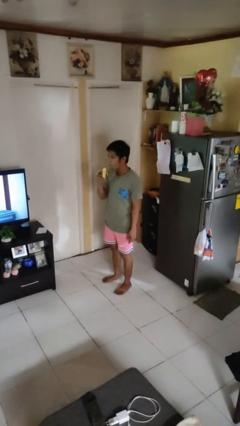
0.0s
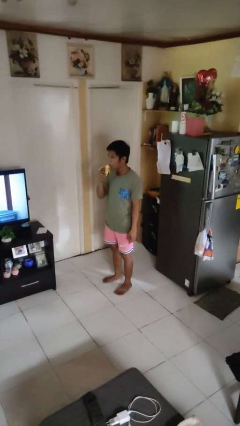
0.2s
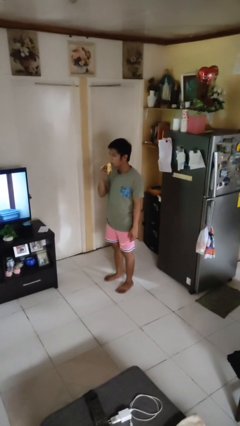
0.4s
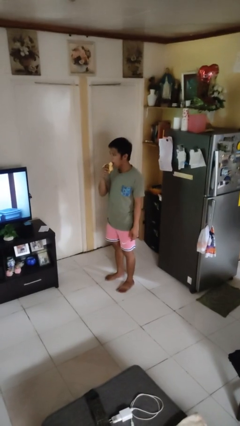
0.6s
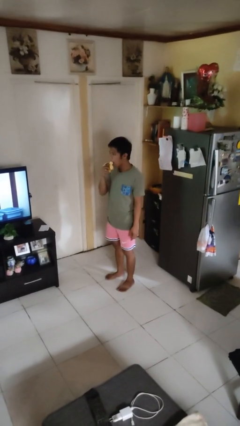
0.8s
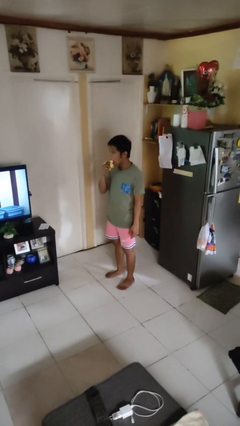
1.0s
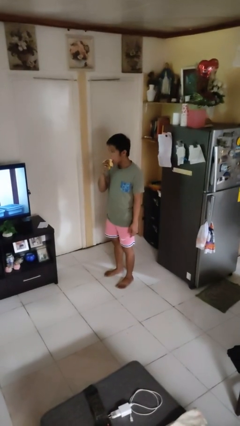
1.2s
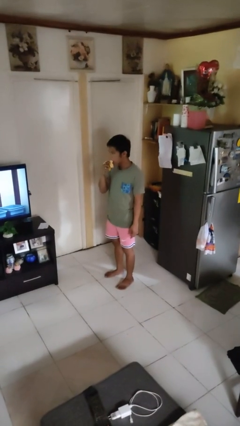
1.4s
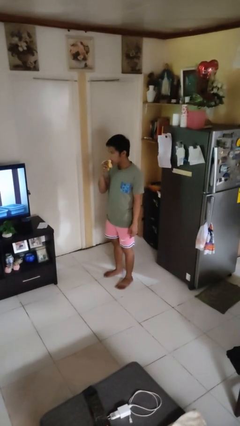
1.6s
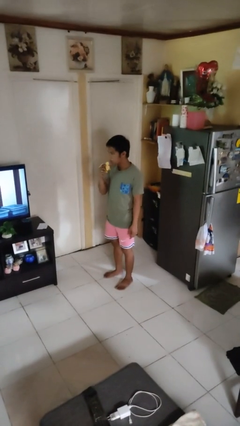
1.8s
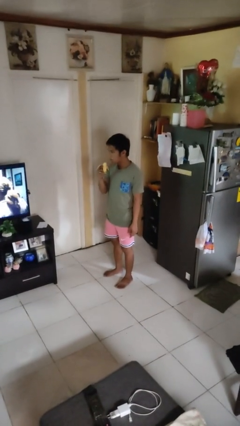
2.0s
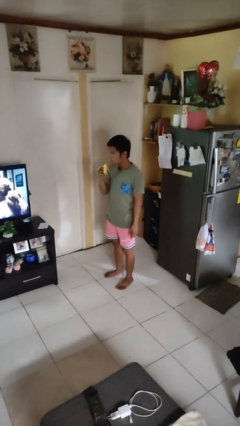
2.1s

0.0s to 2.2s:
person eats banana

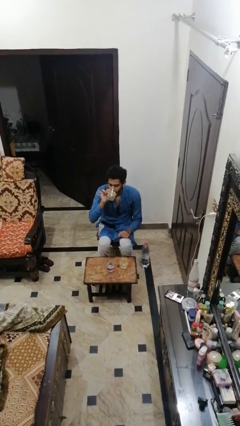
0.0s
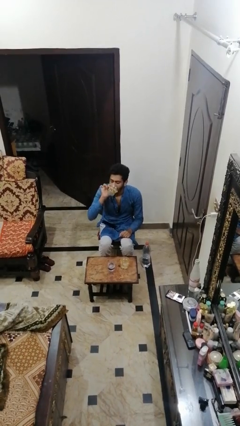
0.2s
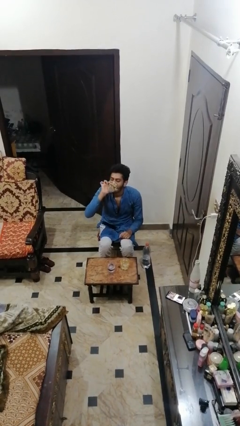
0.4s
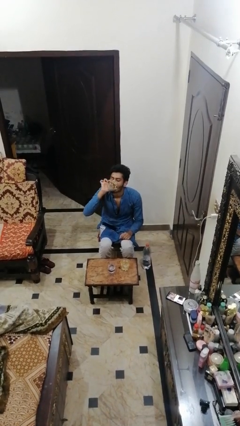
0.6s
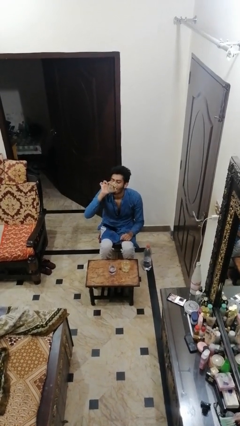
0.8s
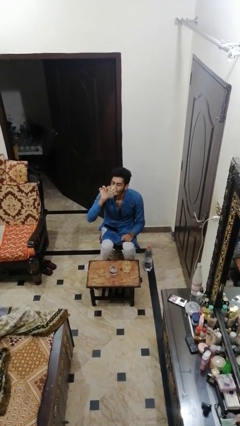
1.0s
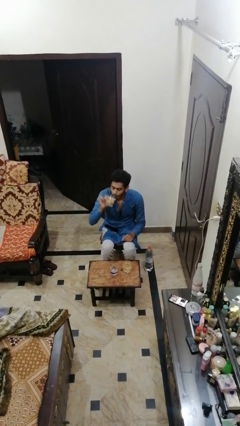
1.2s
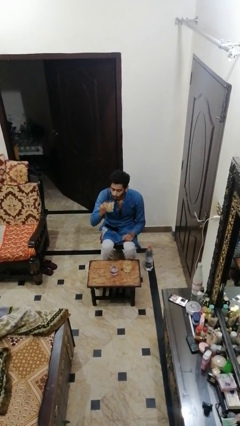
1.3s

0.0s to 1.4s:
person drinks from shotglass

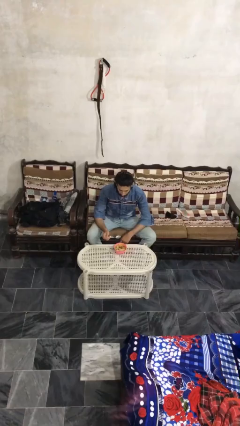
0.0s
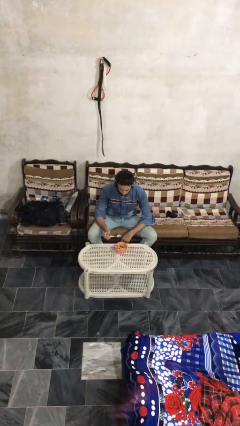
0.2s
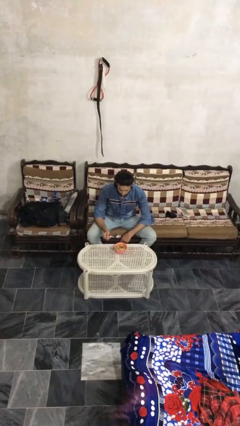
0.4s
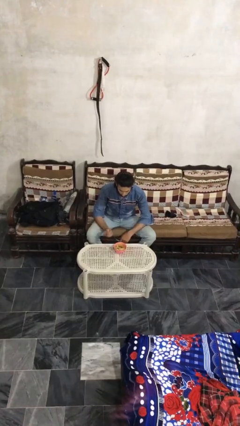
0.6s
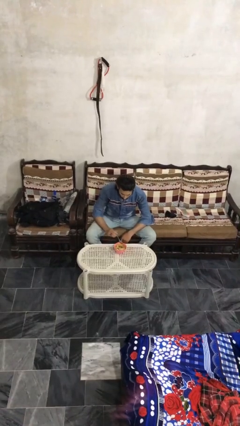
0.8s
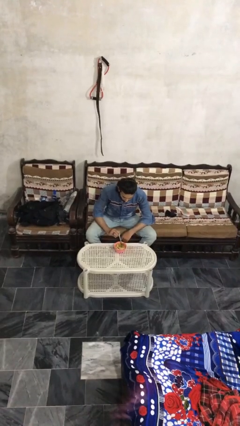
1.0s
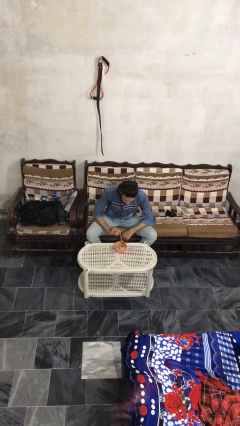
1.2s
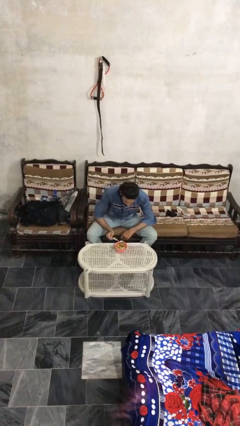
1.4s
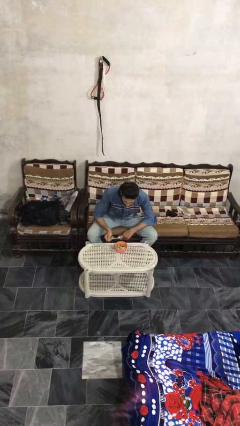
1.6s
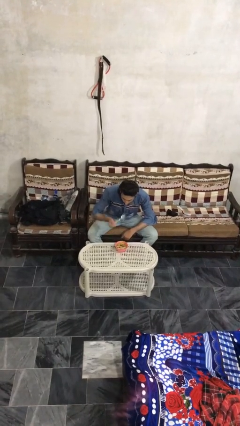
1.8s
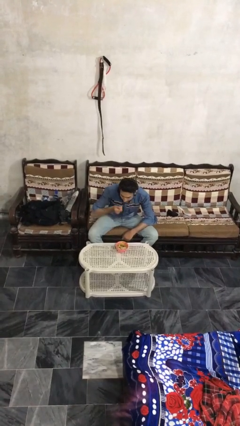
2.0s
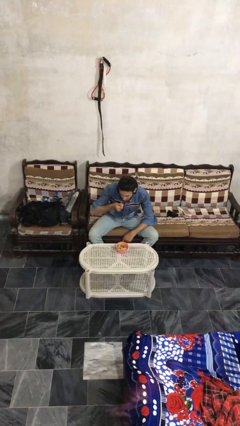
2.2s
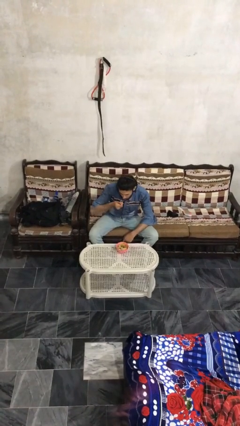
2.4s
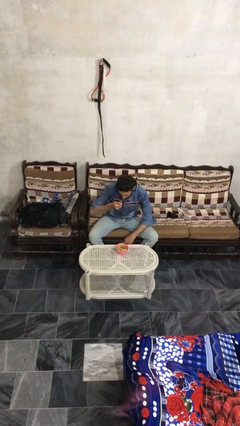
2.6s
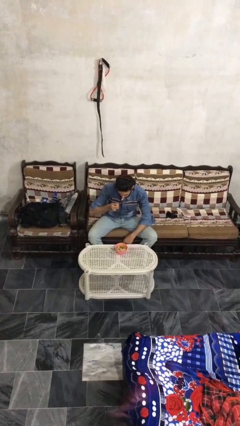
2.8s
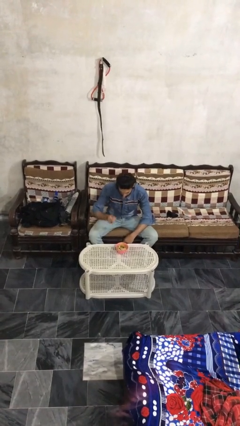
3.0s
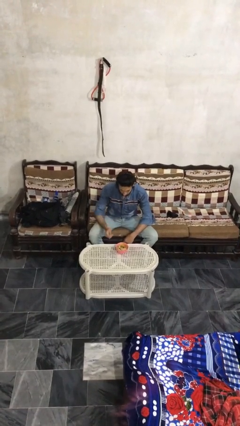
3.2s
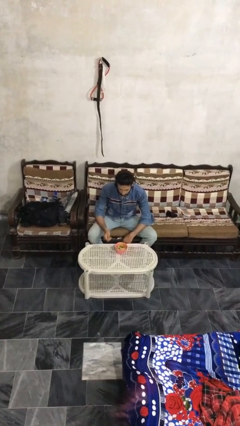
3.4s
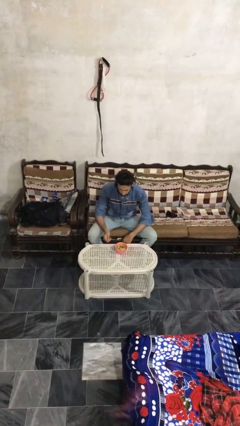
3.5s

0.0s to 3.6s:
person eats with utensil

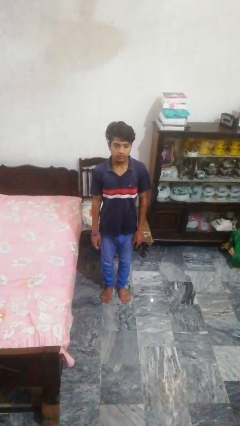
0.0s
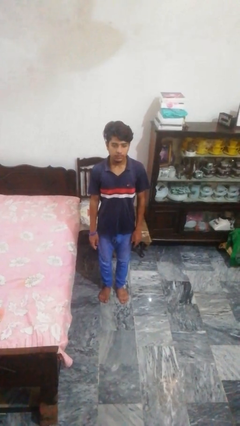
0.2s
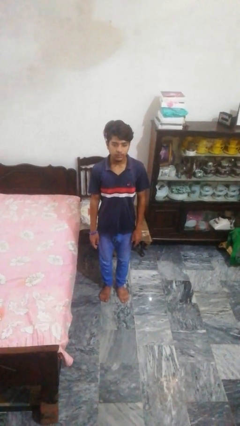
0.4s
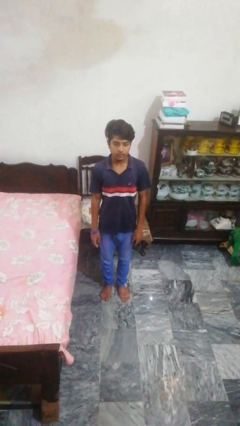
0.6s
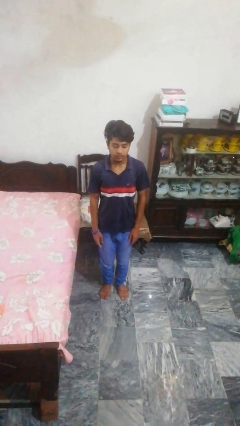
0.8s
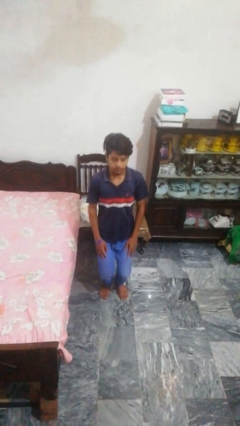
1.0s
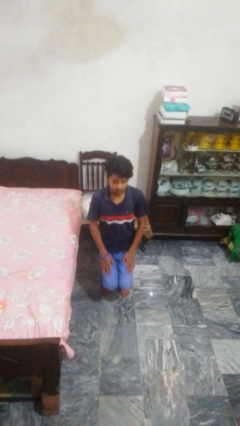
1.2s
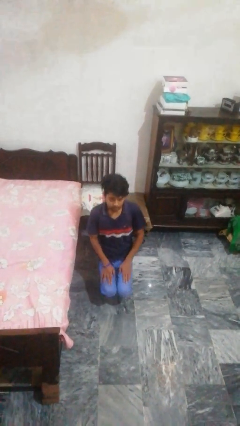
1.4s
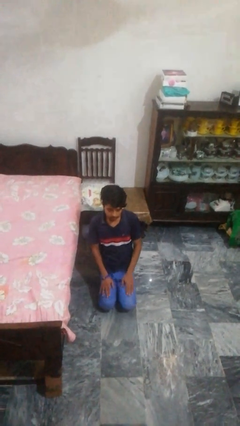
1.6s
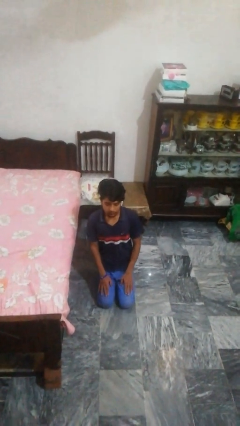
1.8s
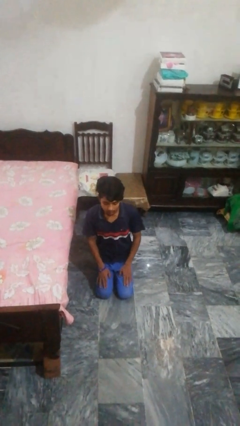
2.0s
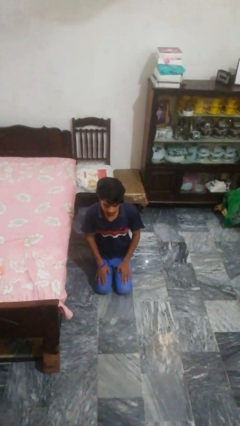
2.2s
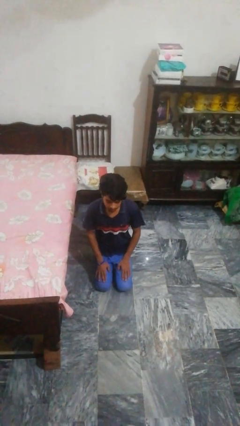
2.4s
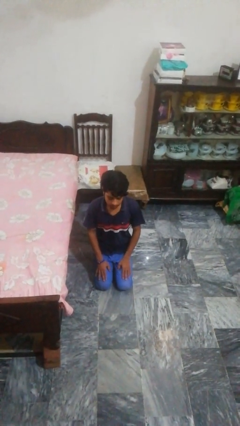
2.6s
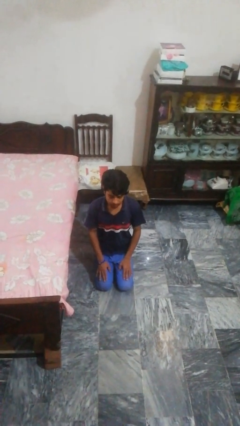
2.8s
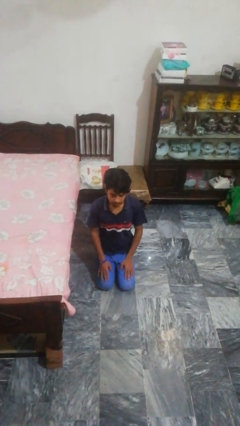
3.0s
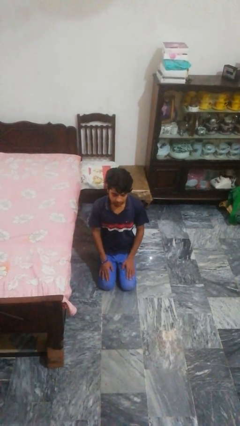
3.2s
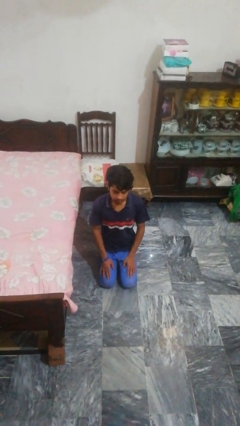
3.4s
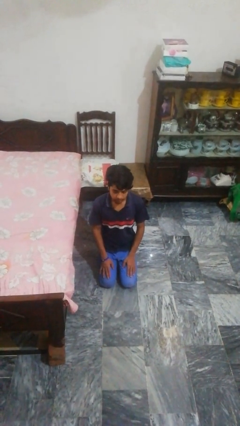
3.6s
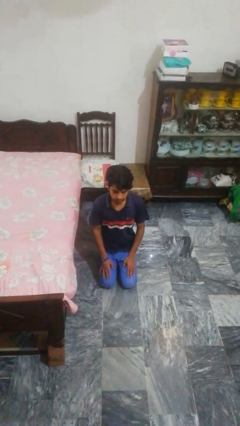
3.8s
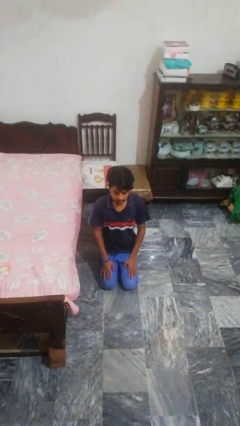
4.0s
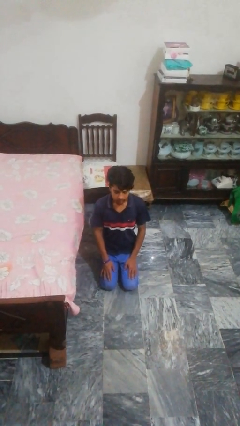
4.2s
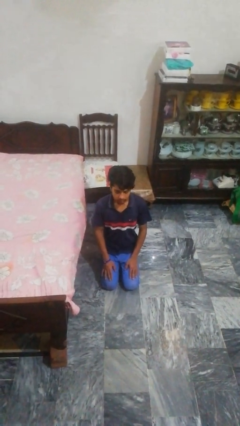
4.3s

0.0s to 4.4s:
person kneels

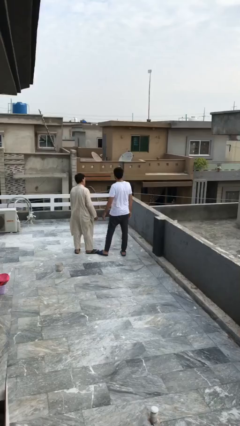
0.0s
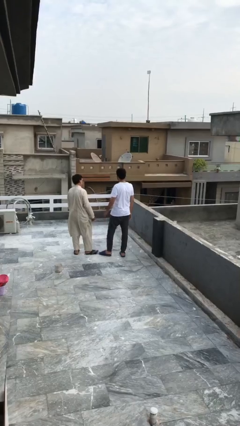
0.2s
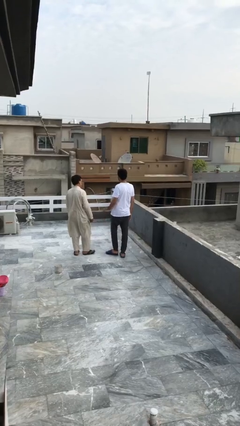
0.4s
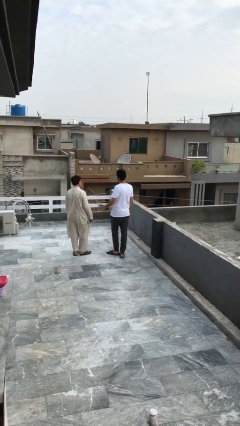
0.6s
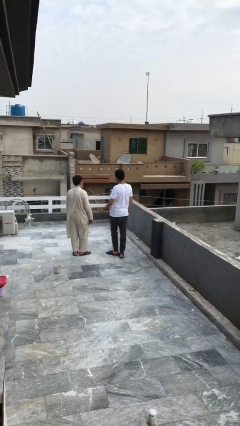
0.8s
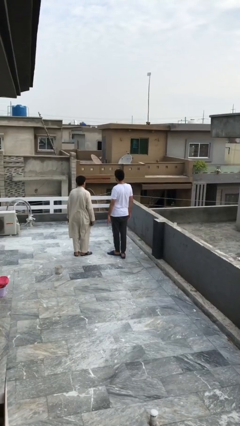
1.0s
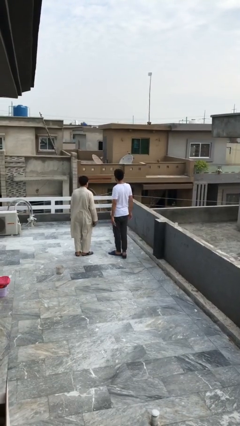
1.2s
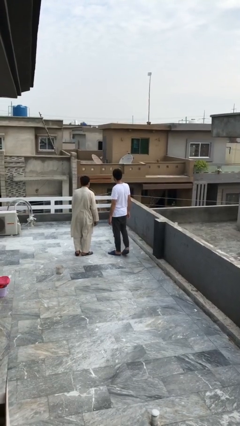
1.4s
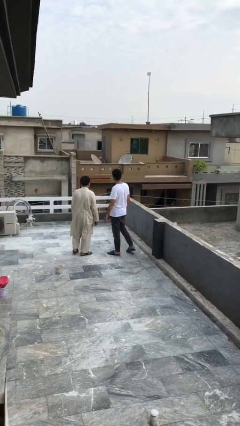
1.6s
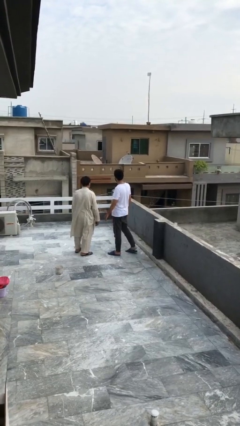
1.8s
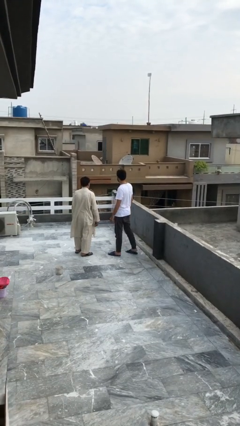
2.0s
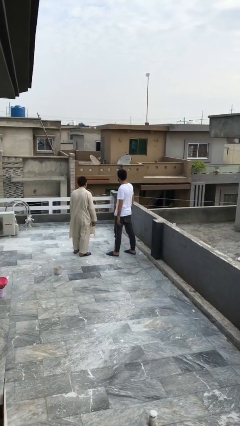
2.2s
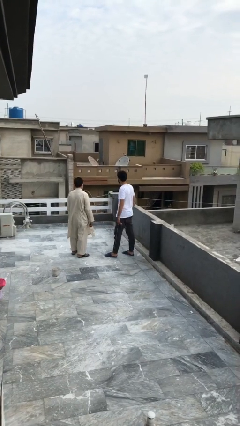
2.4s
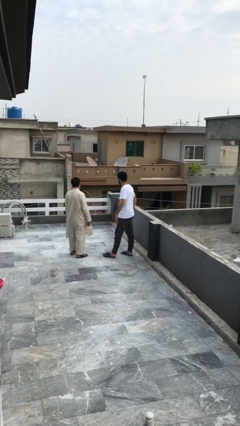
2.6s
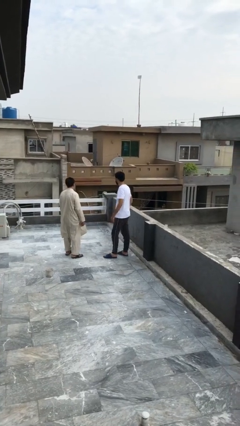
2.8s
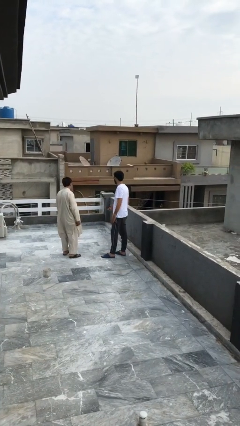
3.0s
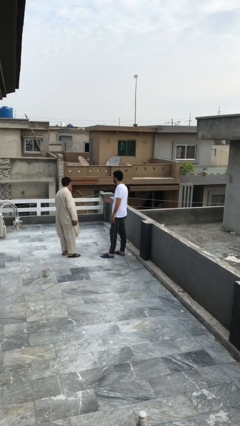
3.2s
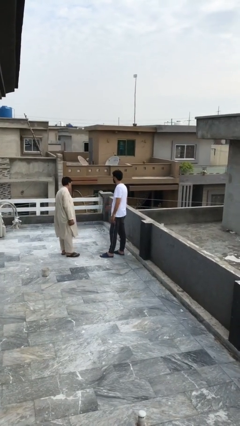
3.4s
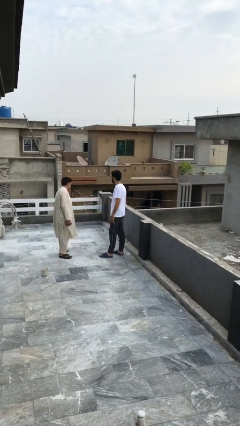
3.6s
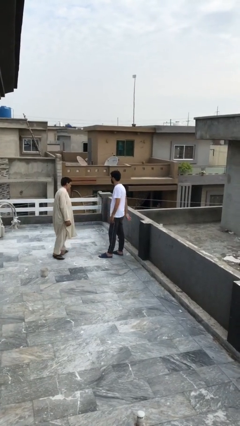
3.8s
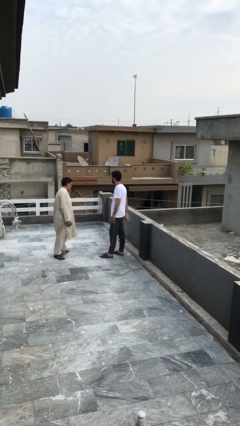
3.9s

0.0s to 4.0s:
person talks to person

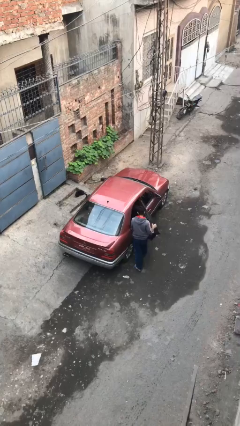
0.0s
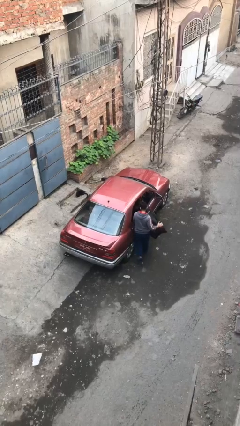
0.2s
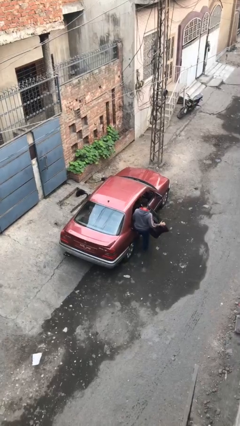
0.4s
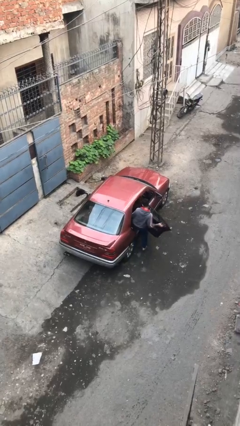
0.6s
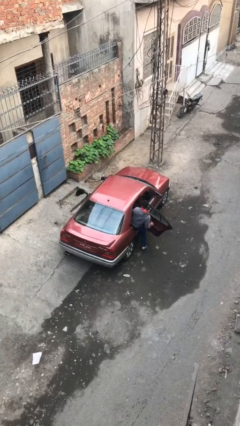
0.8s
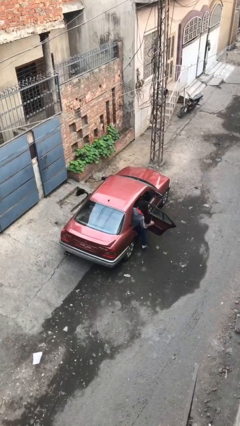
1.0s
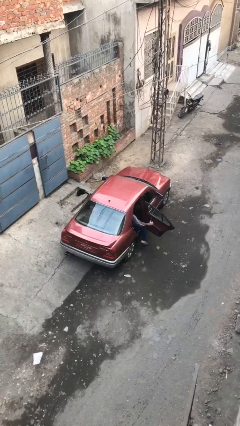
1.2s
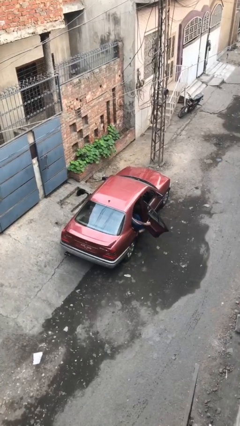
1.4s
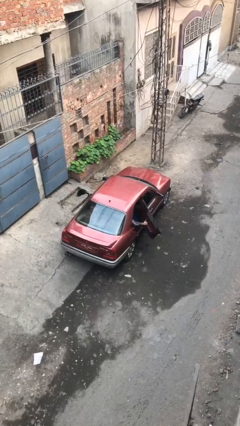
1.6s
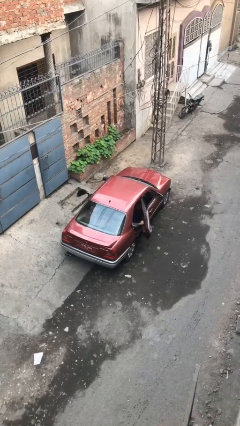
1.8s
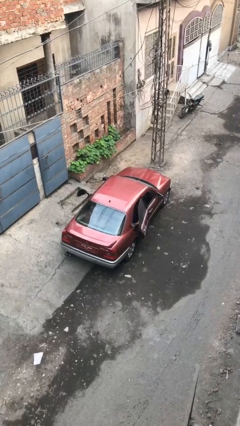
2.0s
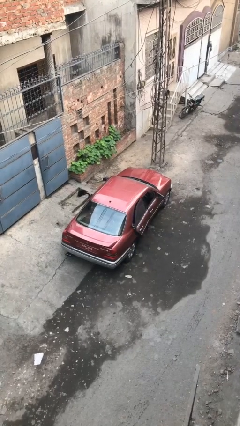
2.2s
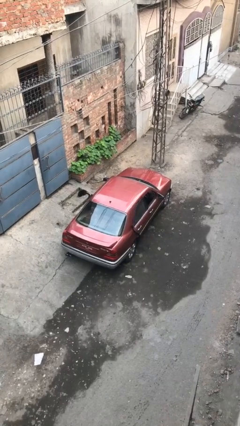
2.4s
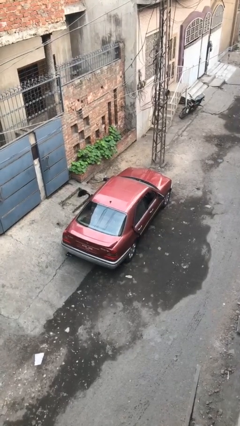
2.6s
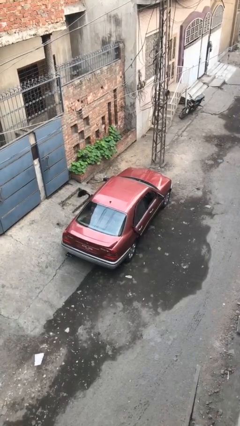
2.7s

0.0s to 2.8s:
car picks up person
